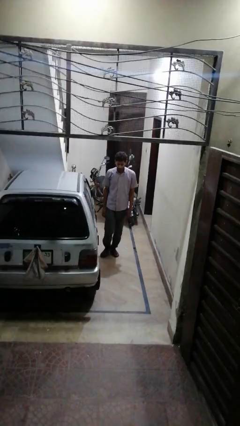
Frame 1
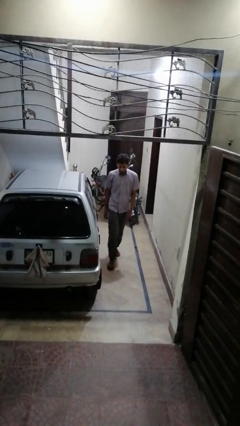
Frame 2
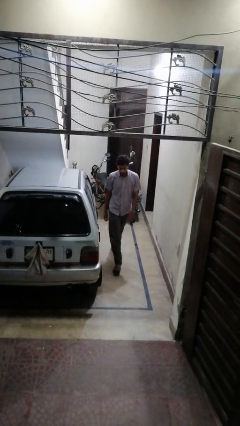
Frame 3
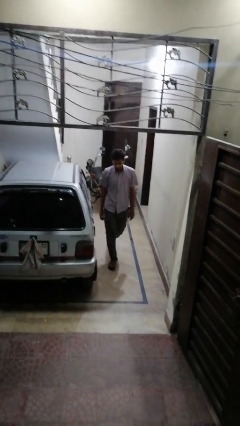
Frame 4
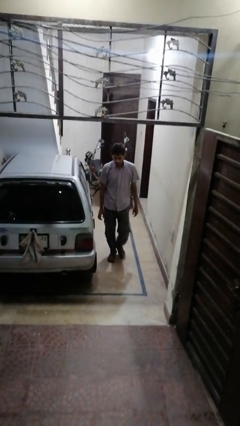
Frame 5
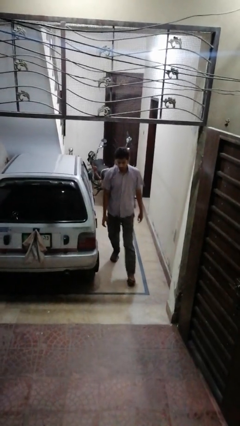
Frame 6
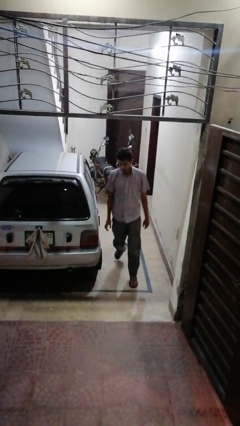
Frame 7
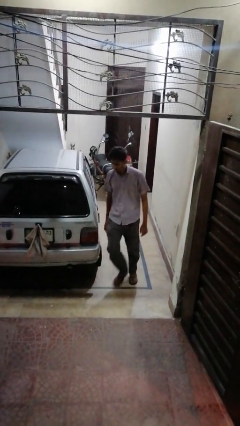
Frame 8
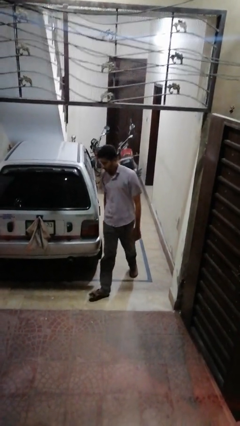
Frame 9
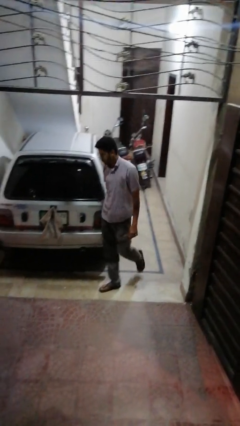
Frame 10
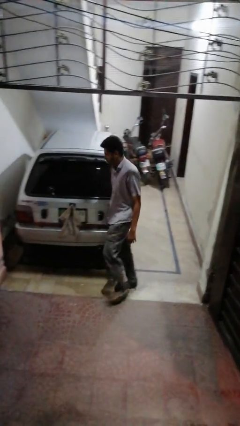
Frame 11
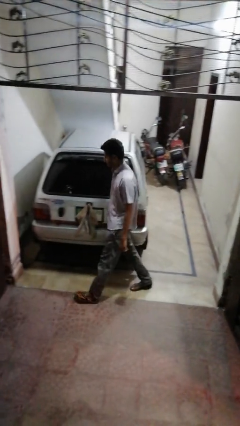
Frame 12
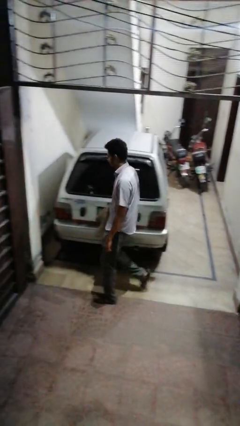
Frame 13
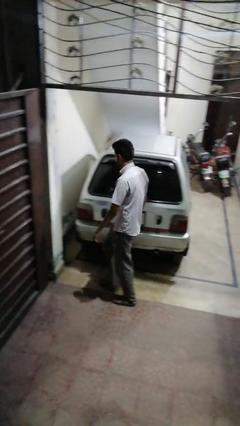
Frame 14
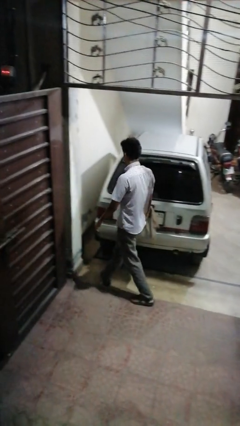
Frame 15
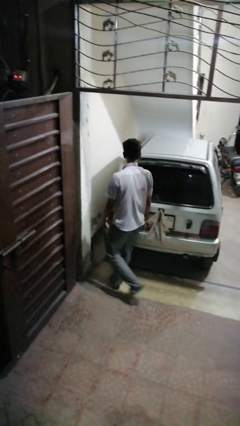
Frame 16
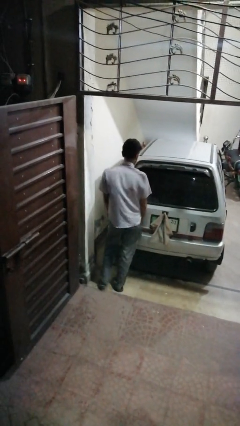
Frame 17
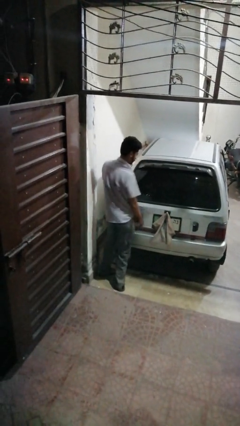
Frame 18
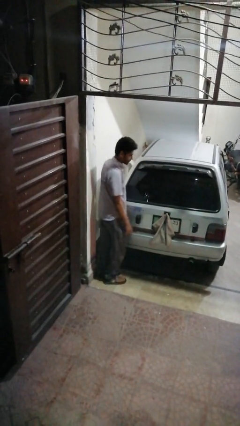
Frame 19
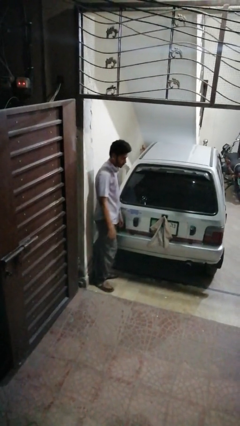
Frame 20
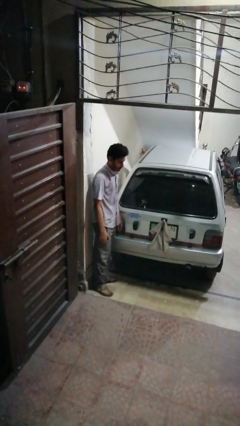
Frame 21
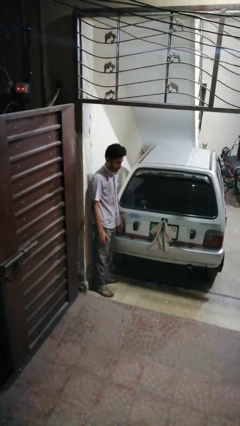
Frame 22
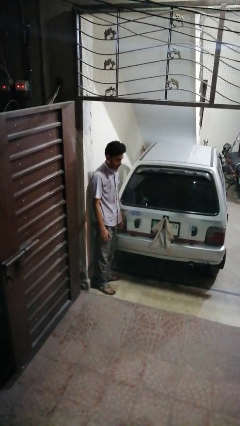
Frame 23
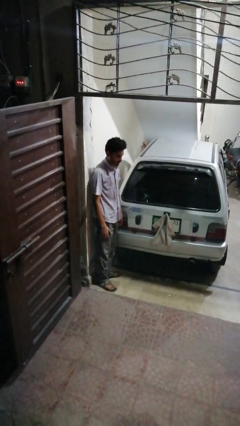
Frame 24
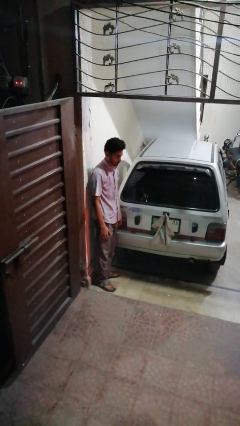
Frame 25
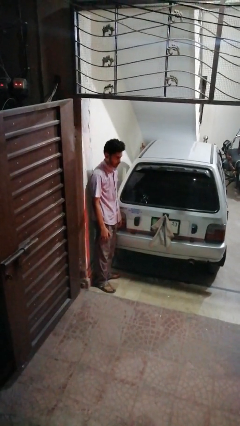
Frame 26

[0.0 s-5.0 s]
person walks around car

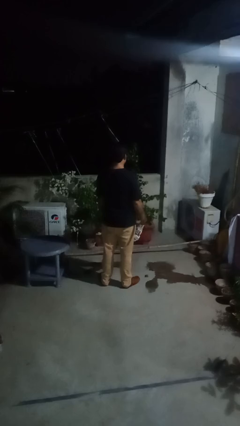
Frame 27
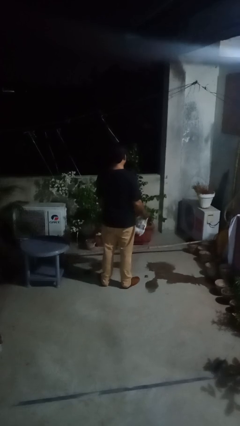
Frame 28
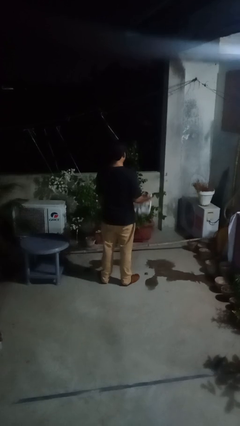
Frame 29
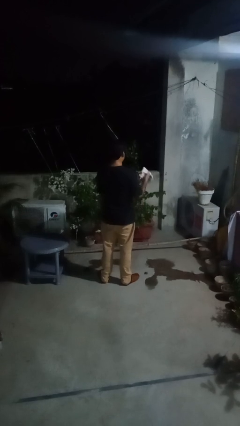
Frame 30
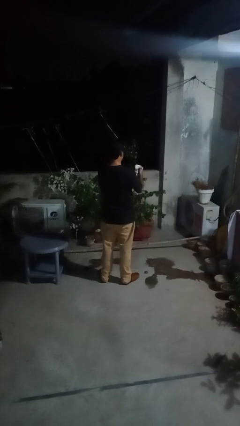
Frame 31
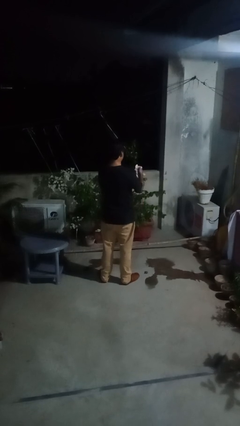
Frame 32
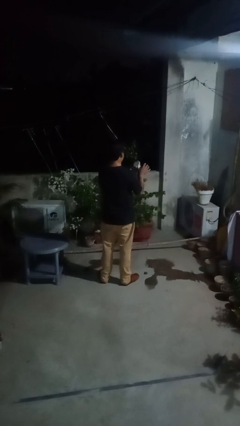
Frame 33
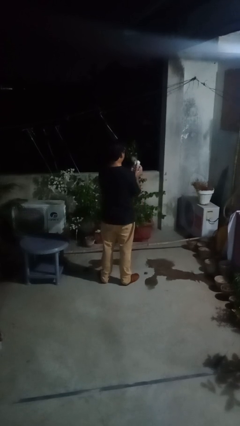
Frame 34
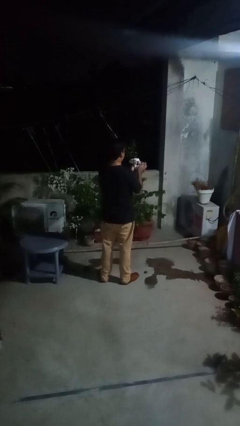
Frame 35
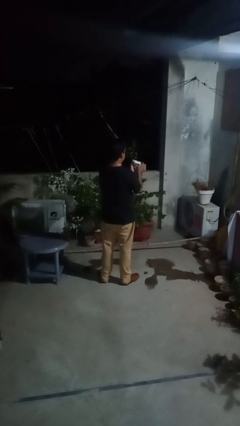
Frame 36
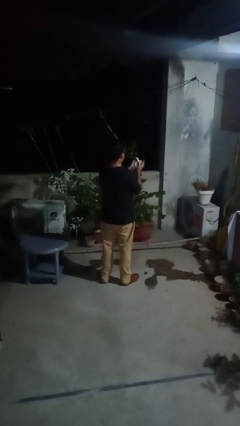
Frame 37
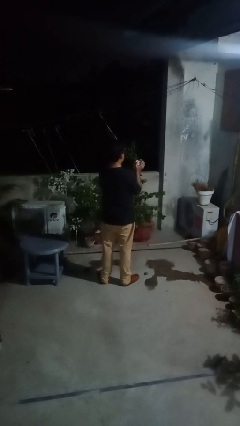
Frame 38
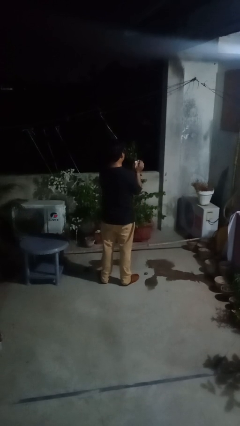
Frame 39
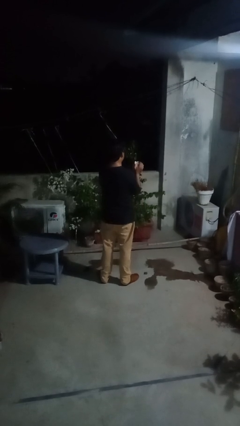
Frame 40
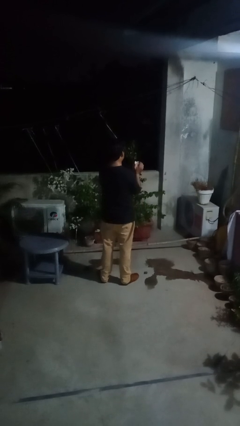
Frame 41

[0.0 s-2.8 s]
person crumples paper

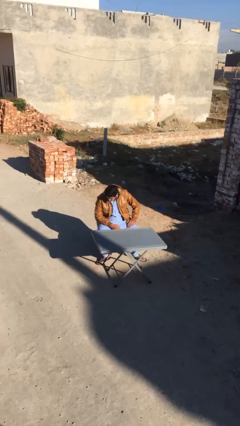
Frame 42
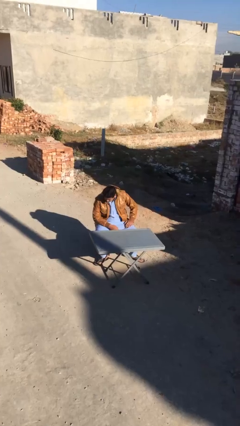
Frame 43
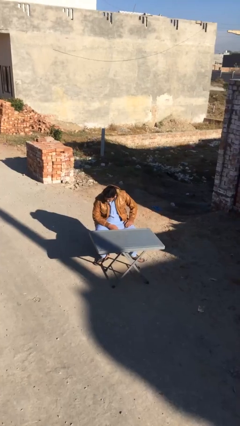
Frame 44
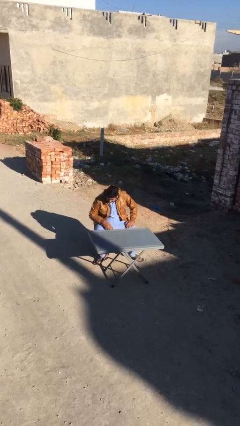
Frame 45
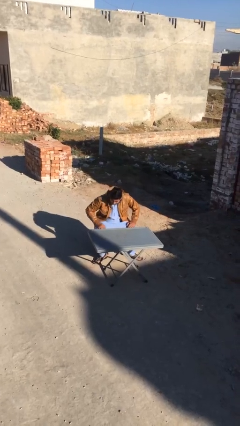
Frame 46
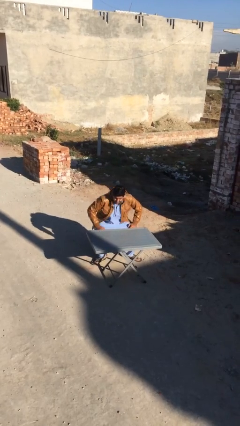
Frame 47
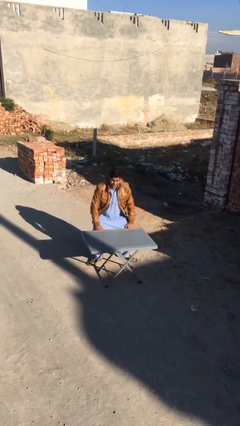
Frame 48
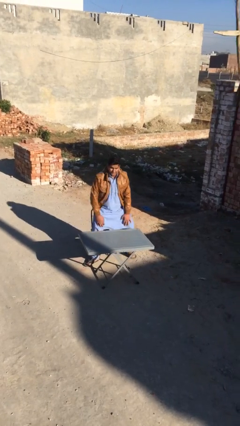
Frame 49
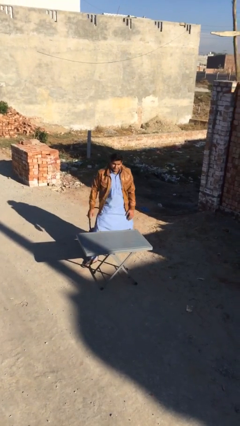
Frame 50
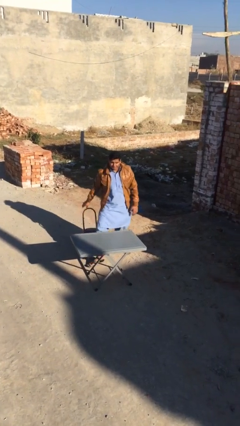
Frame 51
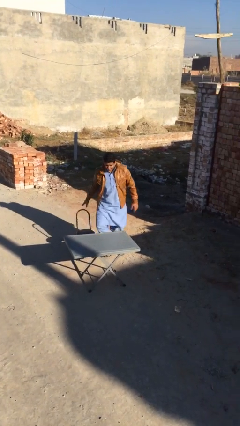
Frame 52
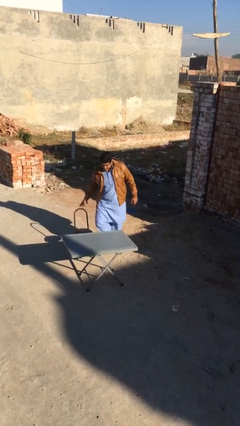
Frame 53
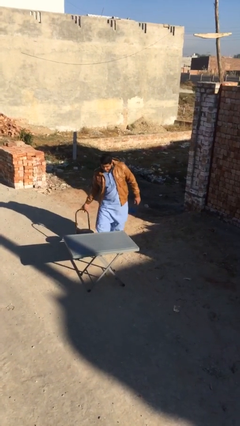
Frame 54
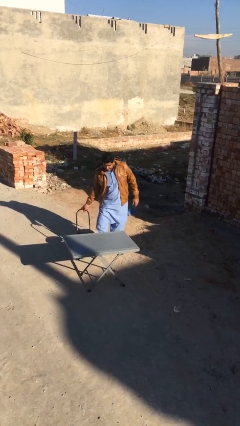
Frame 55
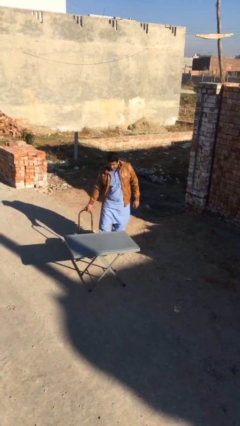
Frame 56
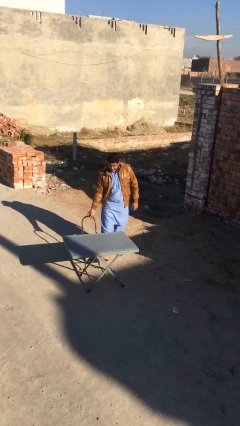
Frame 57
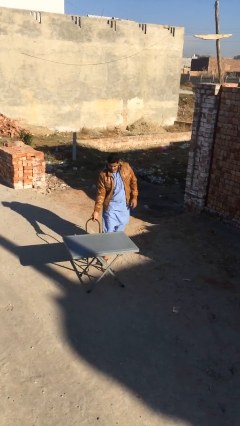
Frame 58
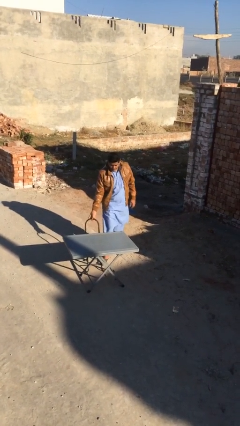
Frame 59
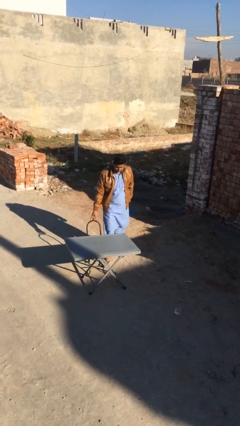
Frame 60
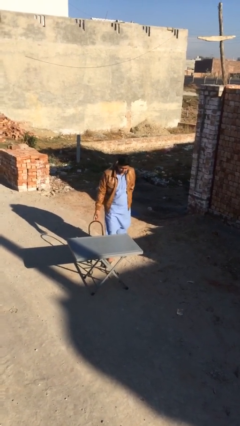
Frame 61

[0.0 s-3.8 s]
person stands up

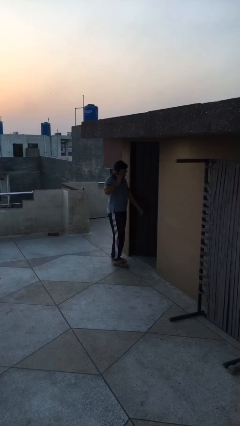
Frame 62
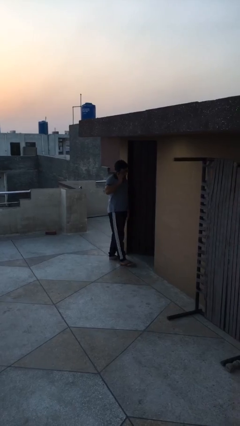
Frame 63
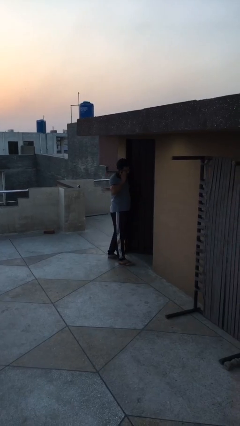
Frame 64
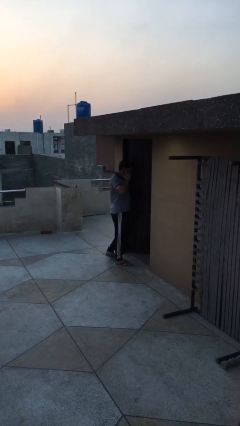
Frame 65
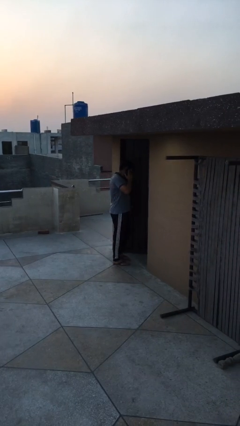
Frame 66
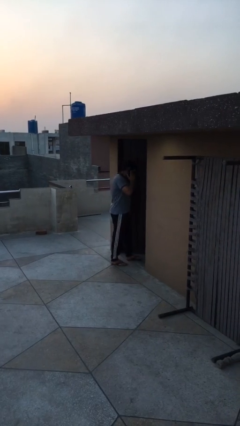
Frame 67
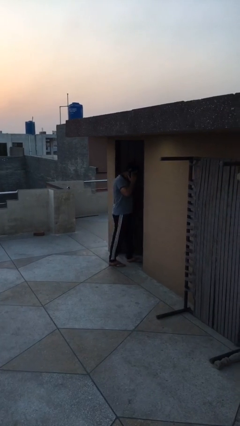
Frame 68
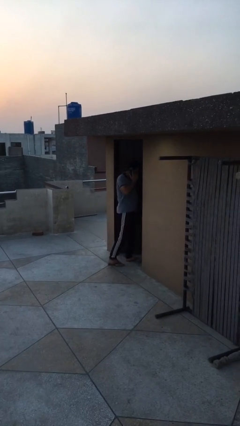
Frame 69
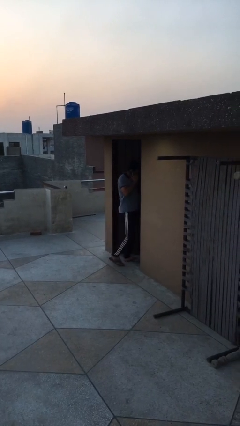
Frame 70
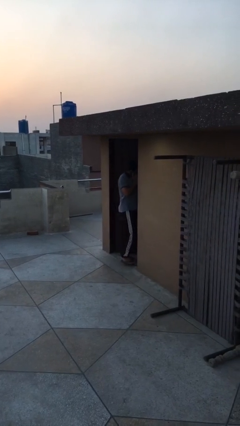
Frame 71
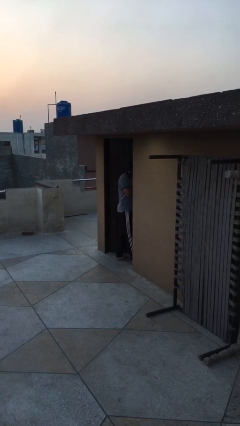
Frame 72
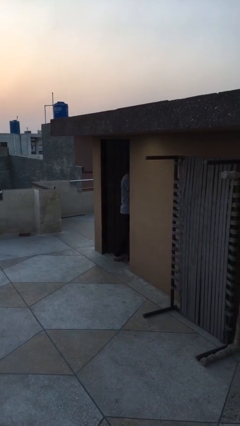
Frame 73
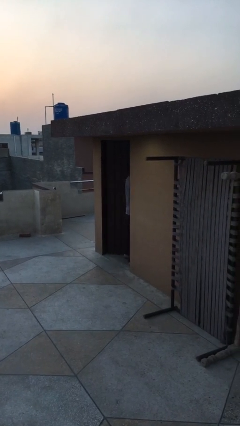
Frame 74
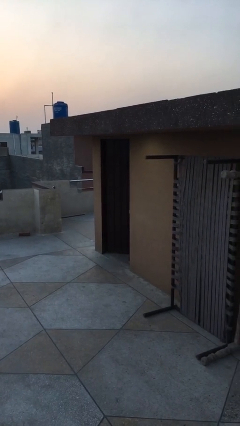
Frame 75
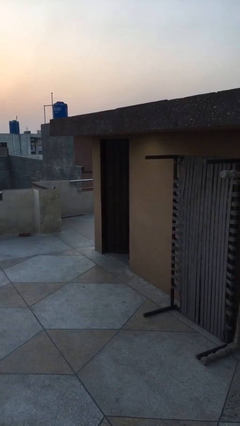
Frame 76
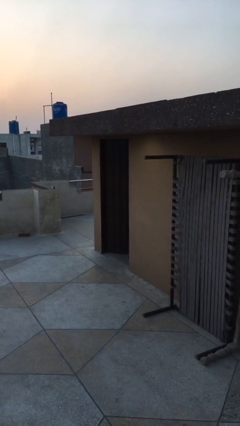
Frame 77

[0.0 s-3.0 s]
person exits scene through structure

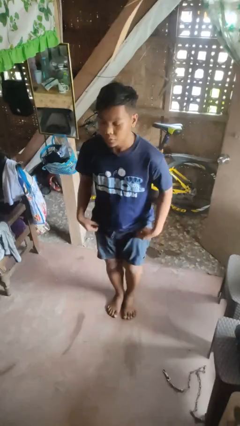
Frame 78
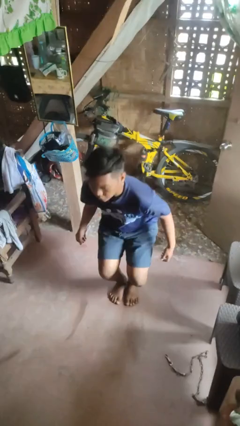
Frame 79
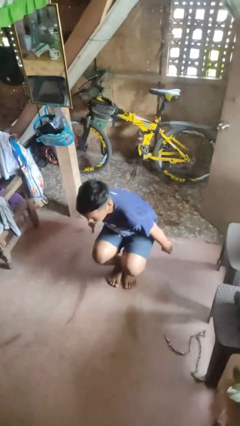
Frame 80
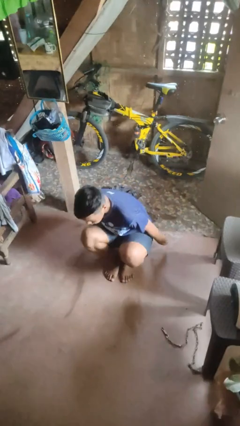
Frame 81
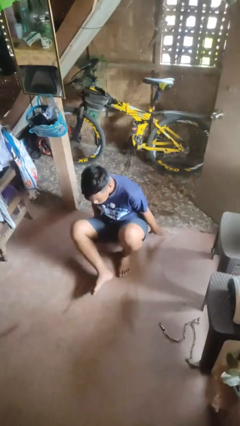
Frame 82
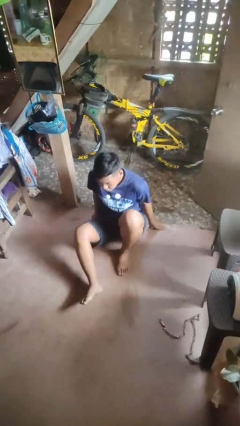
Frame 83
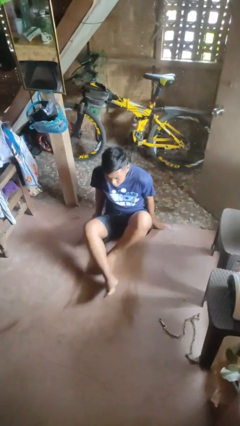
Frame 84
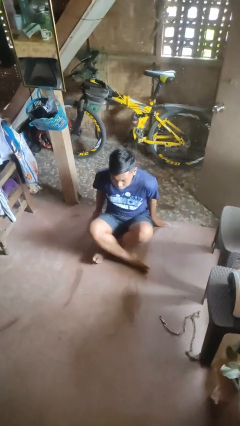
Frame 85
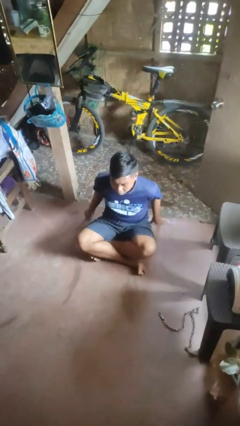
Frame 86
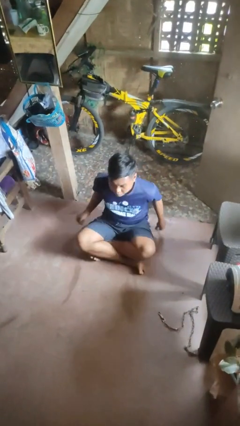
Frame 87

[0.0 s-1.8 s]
person sits crisscross

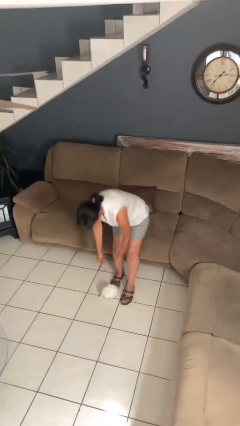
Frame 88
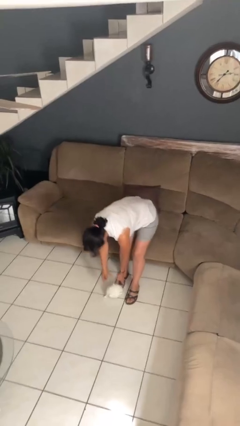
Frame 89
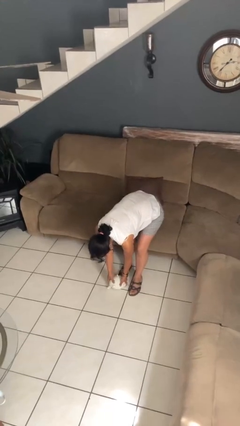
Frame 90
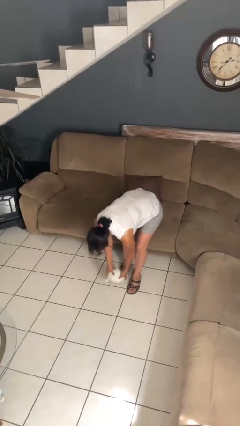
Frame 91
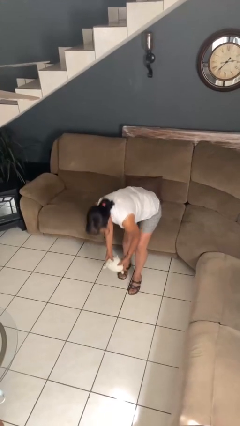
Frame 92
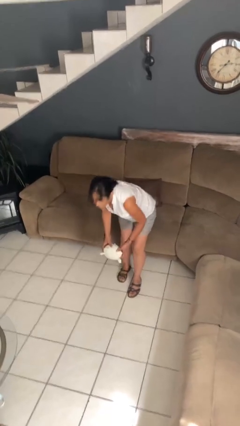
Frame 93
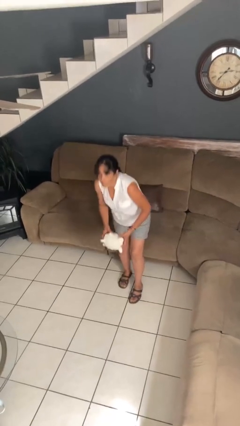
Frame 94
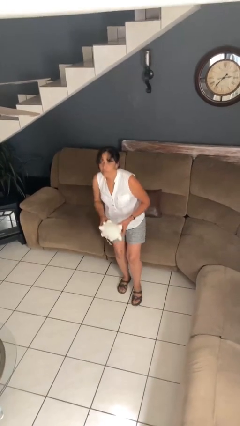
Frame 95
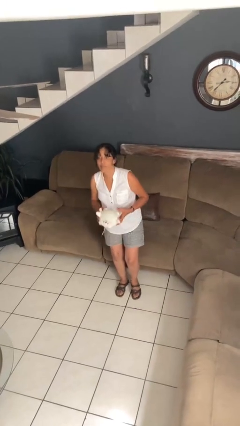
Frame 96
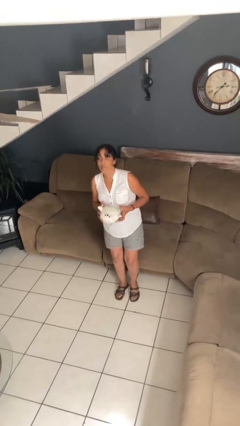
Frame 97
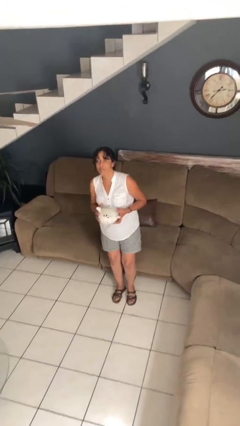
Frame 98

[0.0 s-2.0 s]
person picks up object from floor
